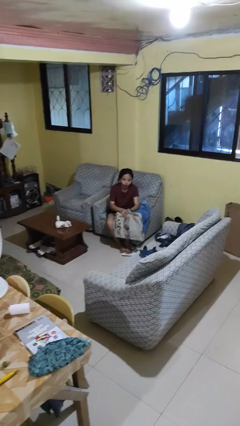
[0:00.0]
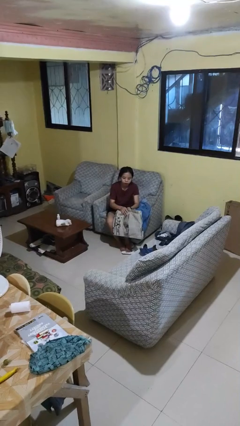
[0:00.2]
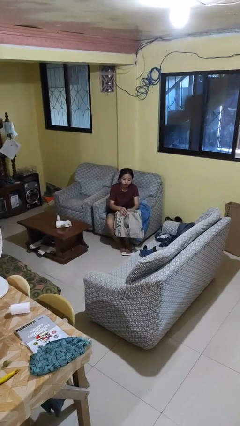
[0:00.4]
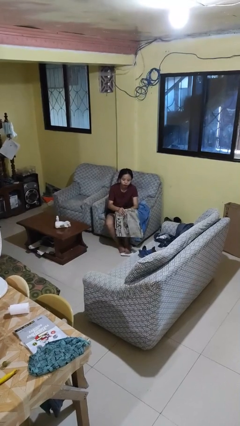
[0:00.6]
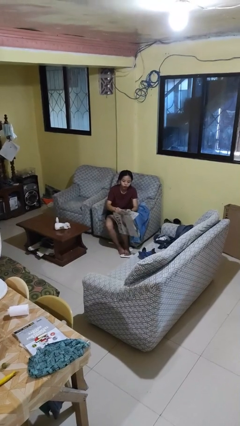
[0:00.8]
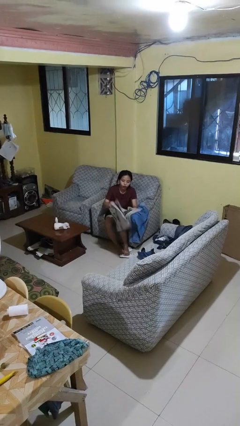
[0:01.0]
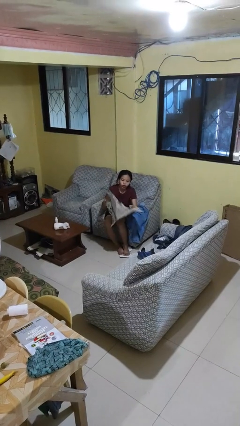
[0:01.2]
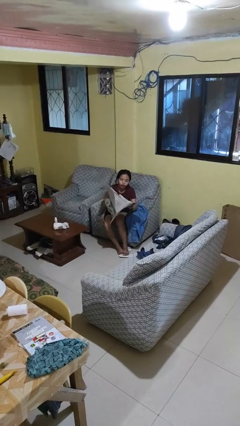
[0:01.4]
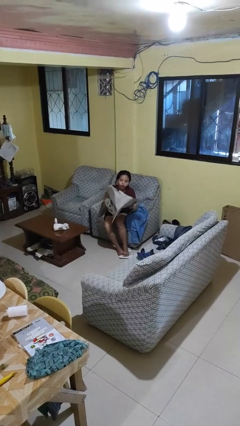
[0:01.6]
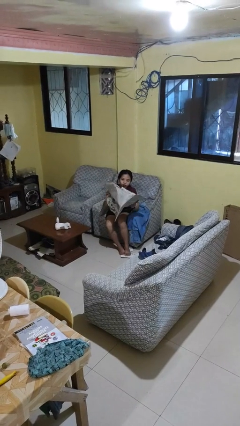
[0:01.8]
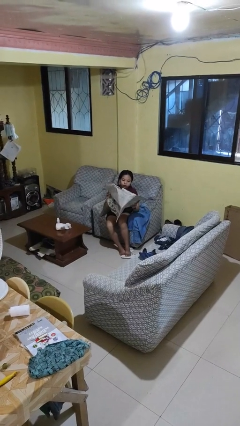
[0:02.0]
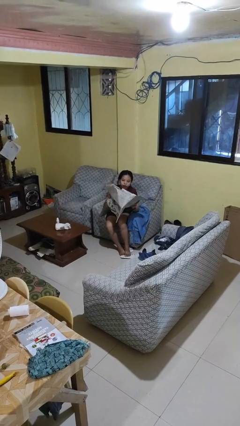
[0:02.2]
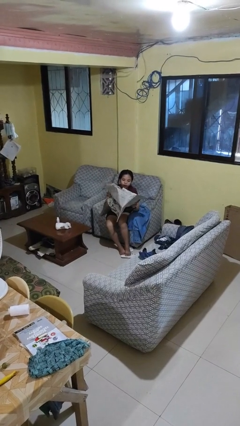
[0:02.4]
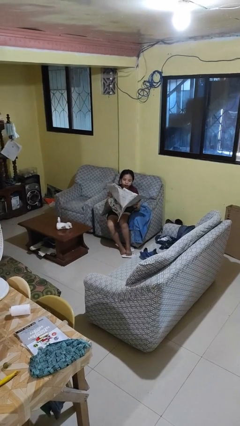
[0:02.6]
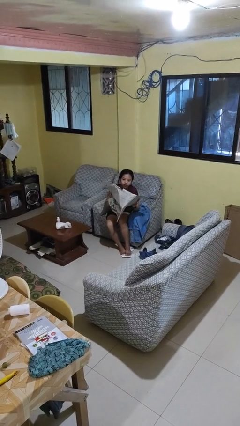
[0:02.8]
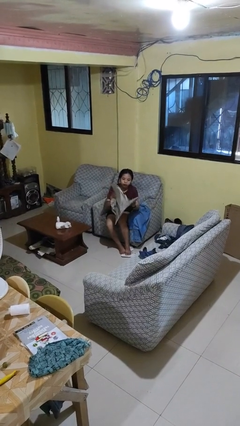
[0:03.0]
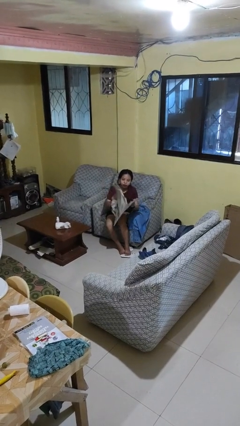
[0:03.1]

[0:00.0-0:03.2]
person reads newspaper

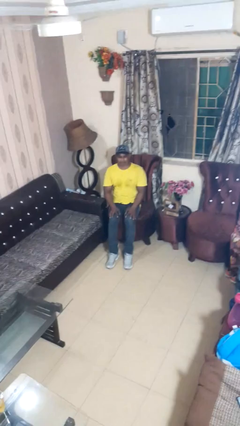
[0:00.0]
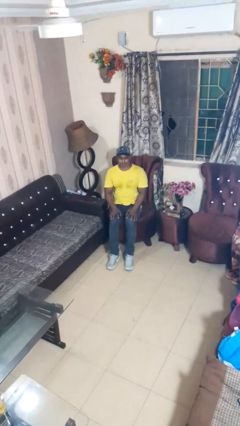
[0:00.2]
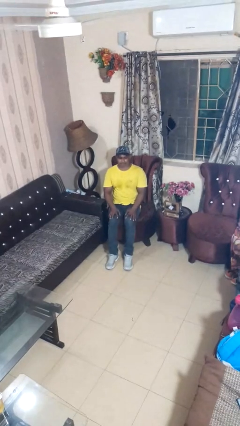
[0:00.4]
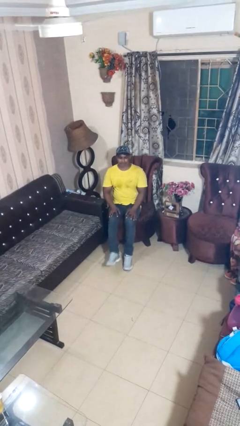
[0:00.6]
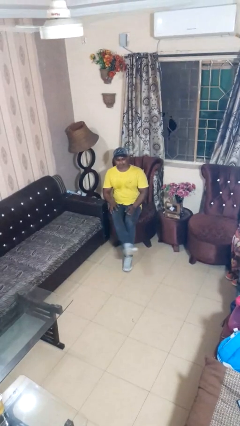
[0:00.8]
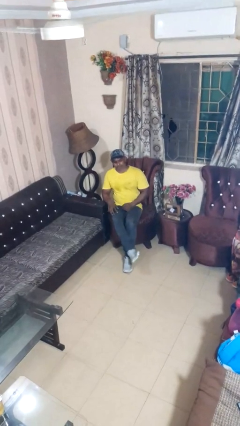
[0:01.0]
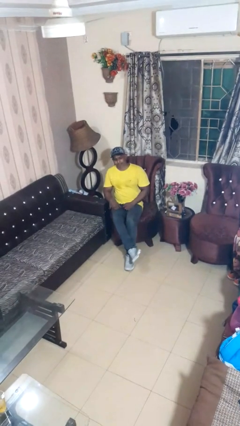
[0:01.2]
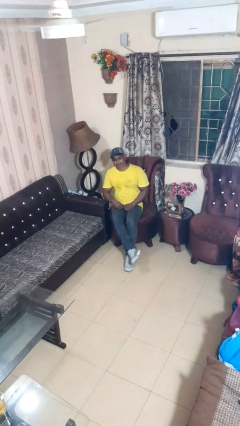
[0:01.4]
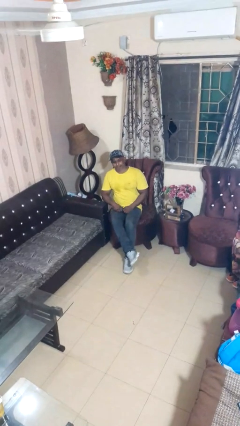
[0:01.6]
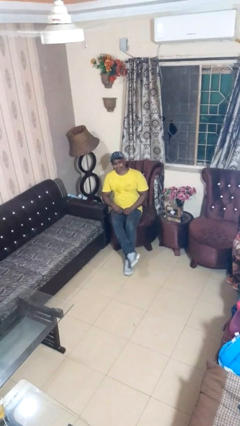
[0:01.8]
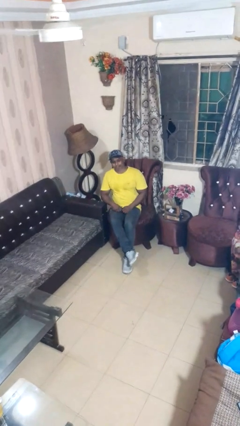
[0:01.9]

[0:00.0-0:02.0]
person crosses legs

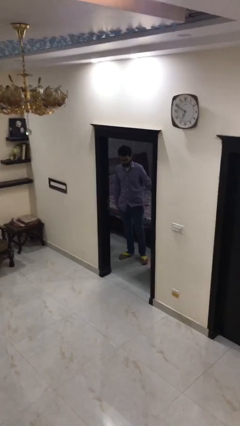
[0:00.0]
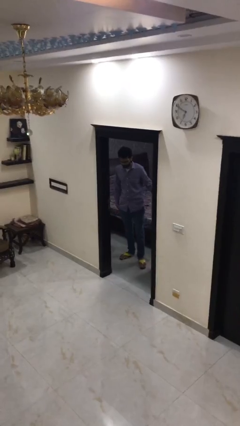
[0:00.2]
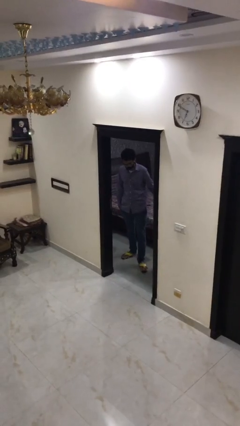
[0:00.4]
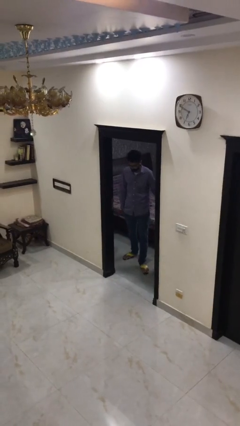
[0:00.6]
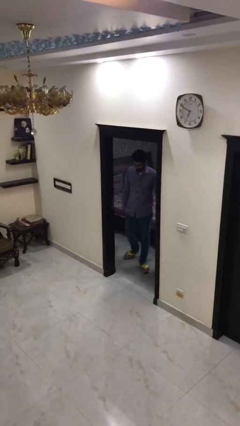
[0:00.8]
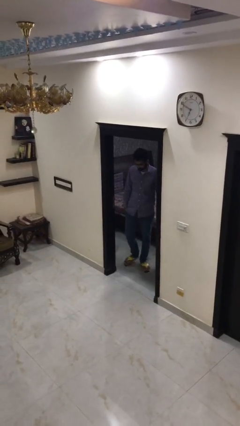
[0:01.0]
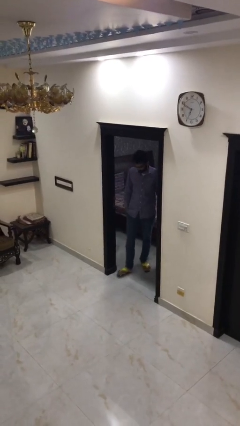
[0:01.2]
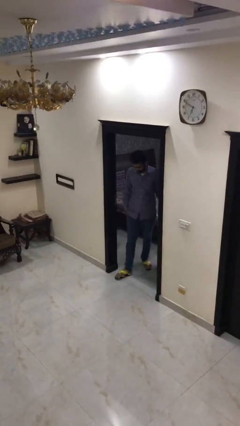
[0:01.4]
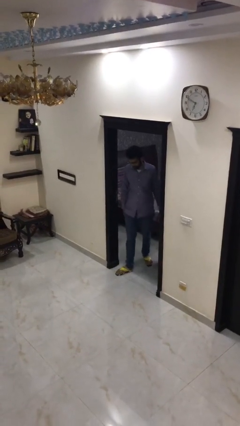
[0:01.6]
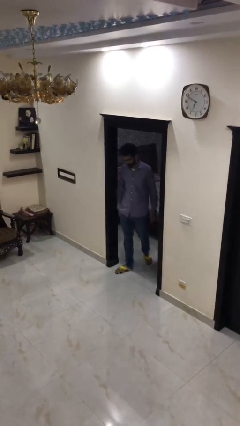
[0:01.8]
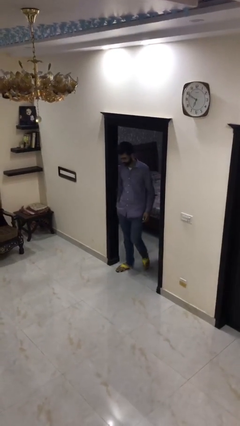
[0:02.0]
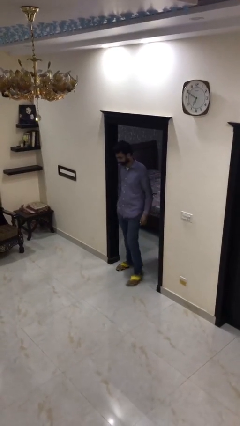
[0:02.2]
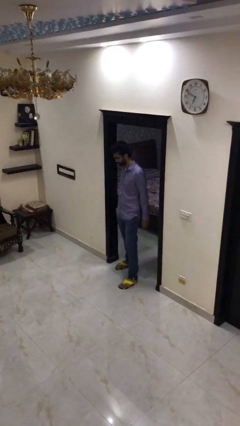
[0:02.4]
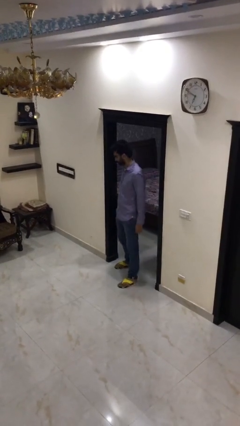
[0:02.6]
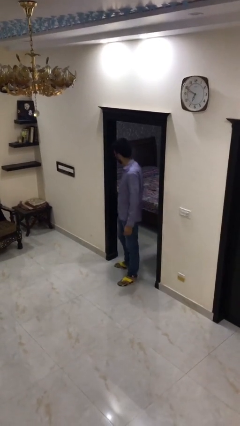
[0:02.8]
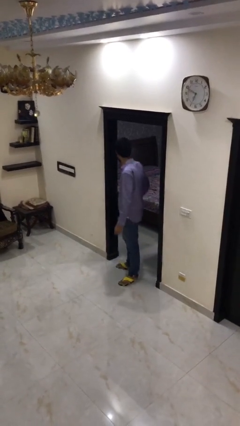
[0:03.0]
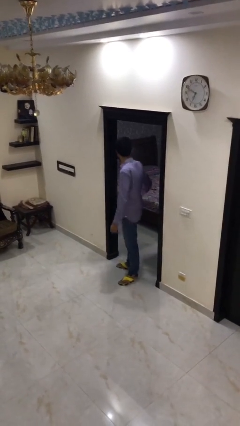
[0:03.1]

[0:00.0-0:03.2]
person enters scene through structure

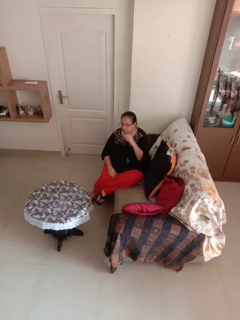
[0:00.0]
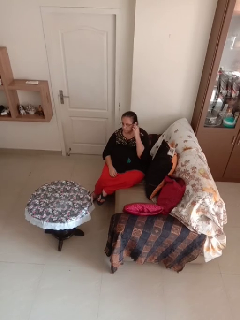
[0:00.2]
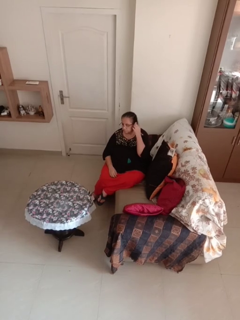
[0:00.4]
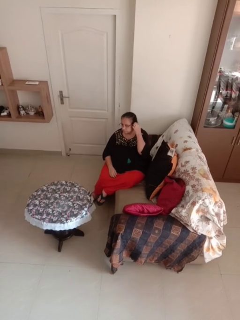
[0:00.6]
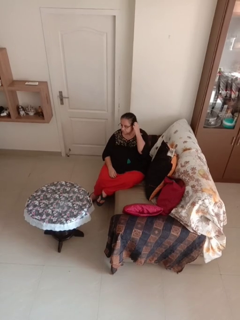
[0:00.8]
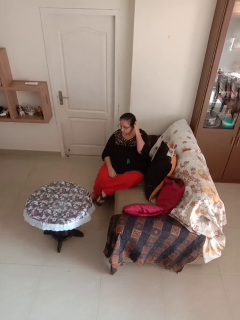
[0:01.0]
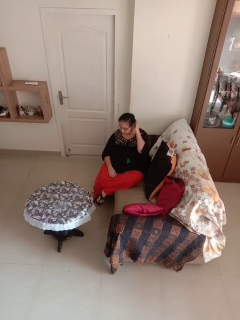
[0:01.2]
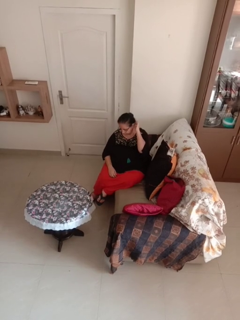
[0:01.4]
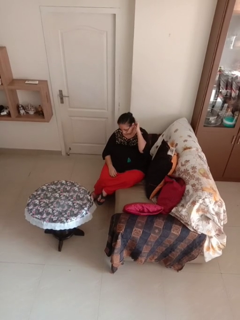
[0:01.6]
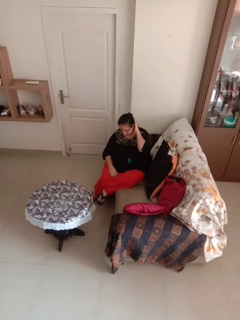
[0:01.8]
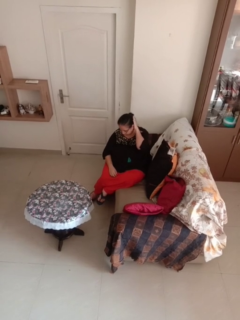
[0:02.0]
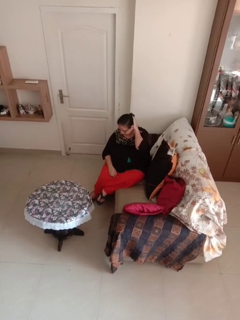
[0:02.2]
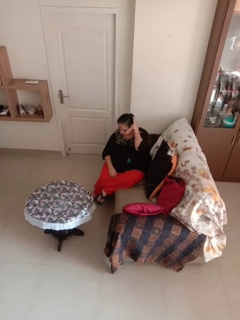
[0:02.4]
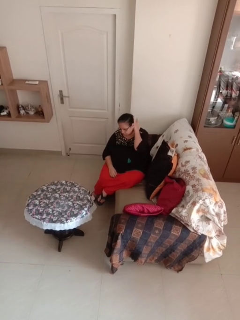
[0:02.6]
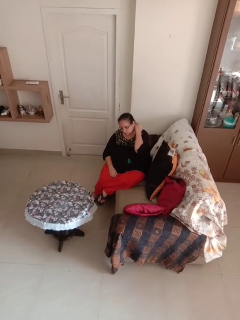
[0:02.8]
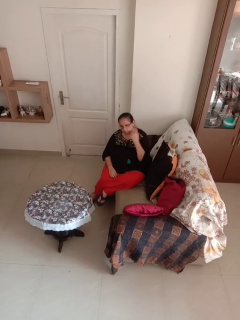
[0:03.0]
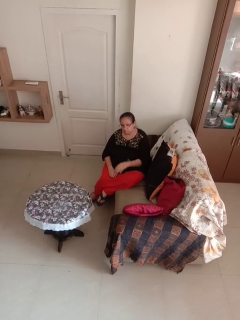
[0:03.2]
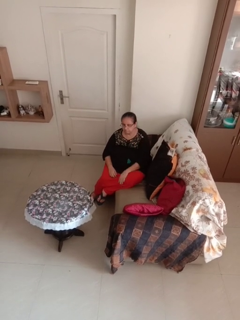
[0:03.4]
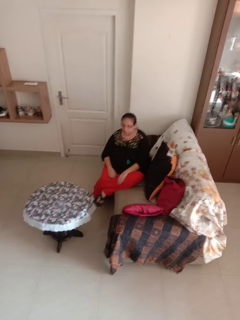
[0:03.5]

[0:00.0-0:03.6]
person strokes hair

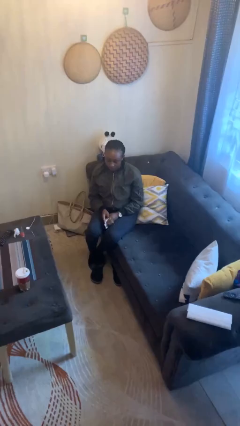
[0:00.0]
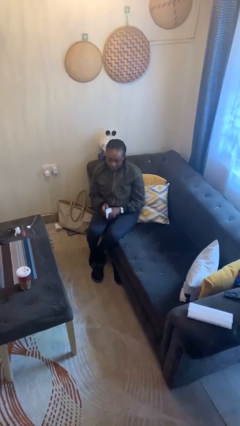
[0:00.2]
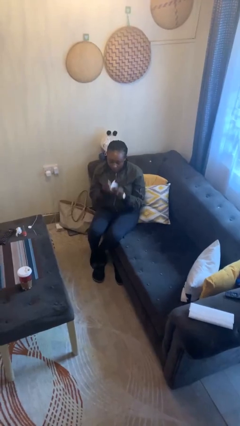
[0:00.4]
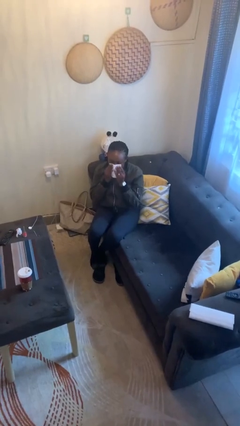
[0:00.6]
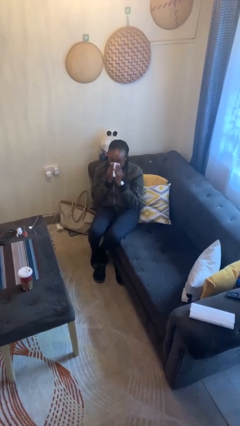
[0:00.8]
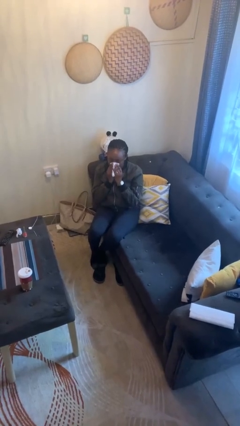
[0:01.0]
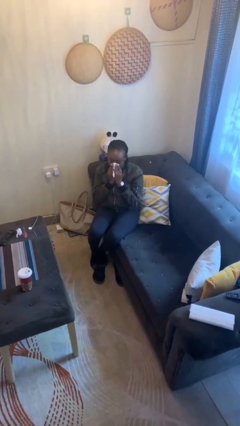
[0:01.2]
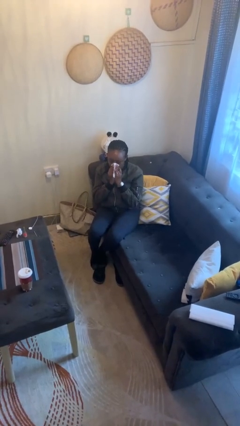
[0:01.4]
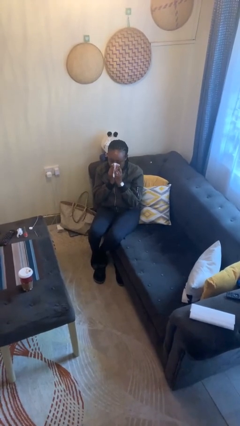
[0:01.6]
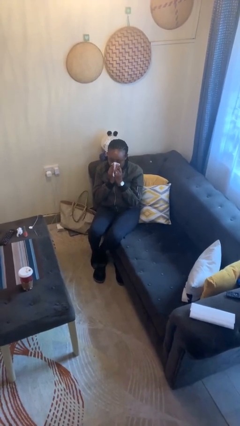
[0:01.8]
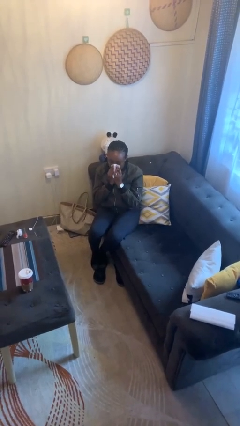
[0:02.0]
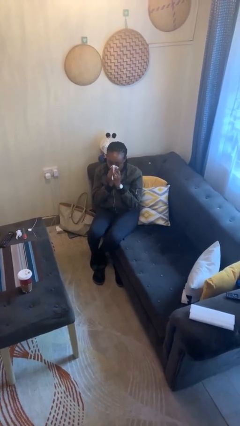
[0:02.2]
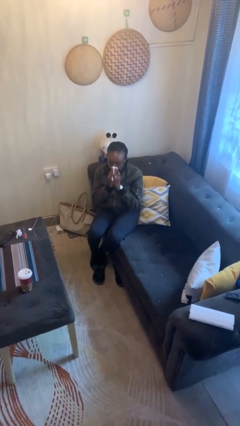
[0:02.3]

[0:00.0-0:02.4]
person blows nose

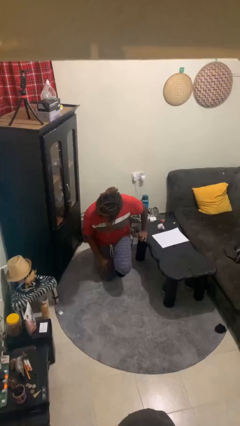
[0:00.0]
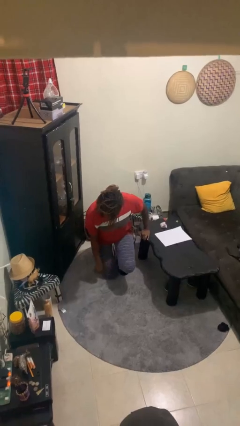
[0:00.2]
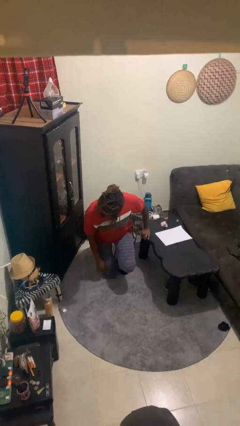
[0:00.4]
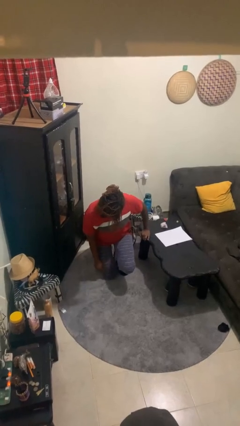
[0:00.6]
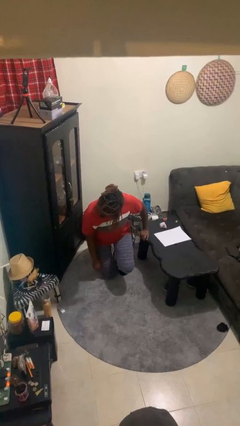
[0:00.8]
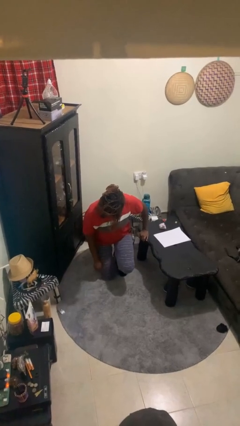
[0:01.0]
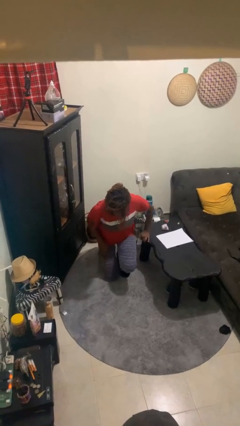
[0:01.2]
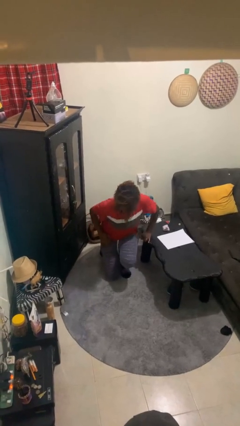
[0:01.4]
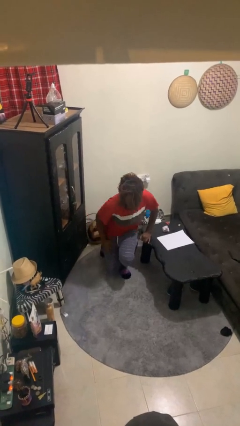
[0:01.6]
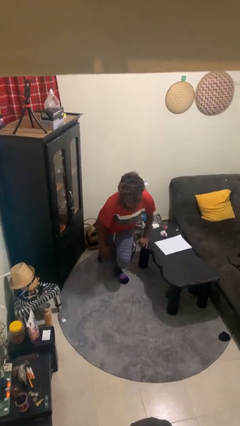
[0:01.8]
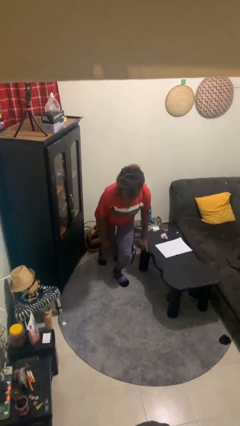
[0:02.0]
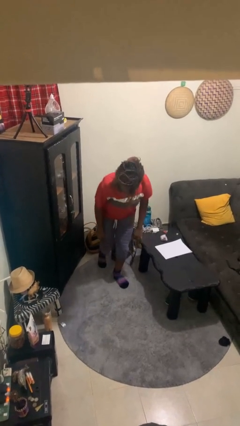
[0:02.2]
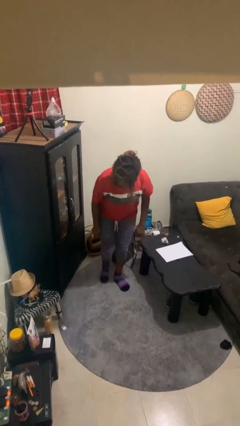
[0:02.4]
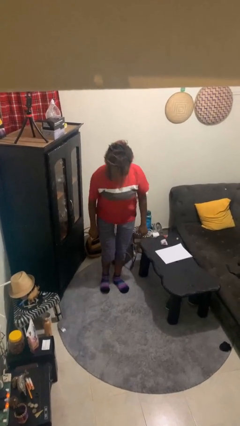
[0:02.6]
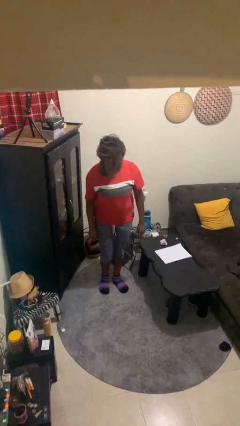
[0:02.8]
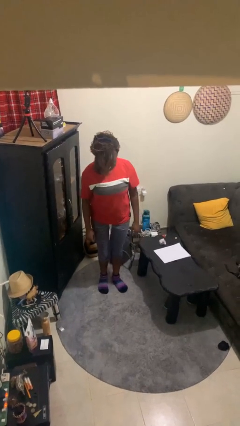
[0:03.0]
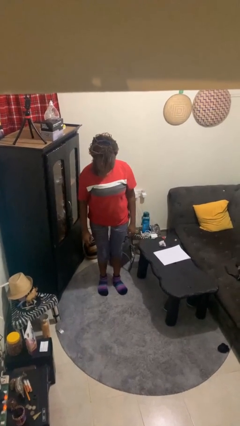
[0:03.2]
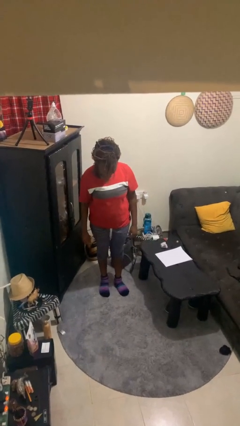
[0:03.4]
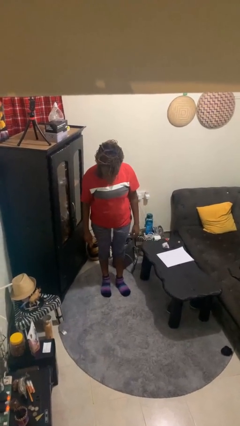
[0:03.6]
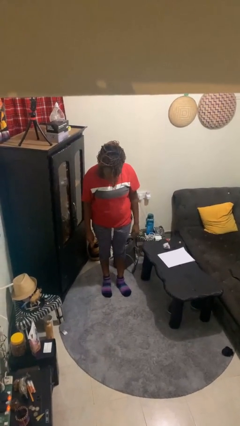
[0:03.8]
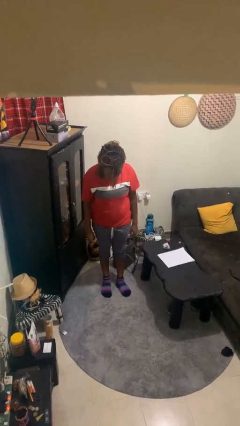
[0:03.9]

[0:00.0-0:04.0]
person stands up from floor
